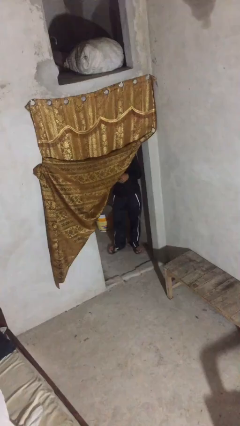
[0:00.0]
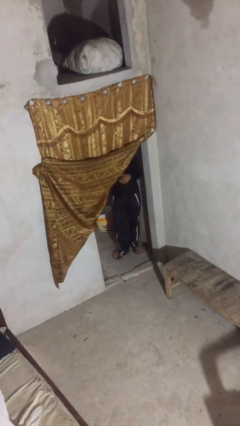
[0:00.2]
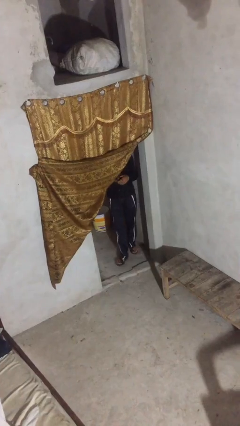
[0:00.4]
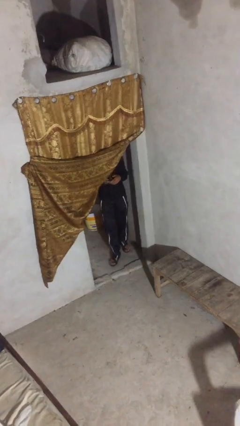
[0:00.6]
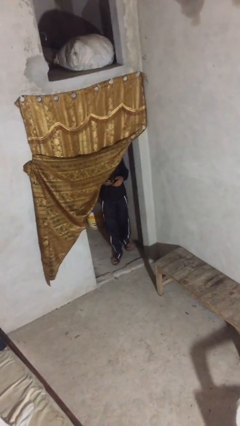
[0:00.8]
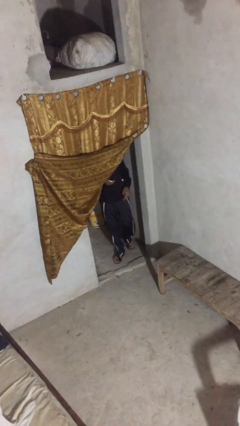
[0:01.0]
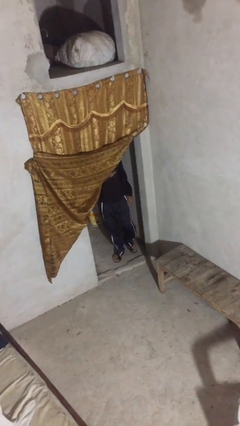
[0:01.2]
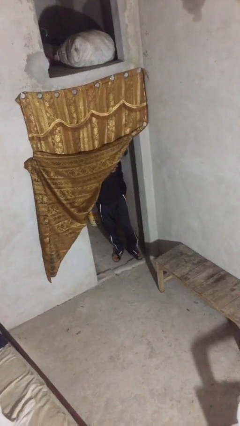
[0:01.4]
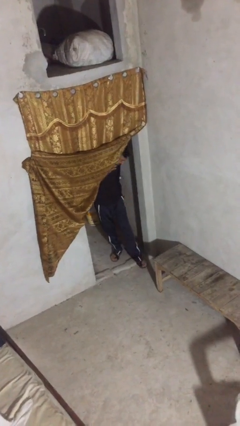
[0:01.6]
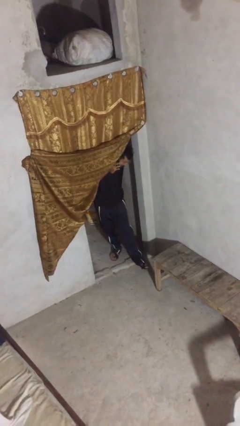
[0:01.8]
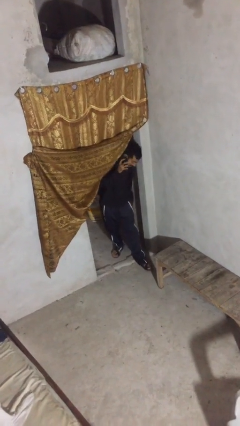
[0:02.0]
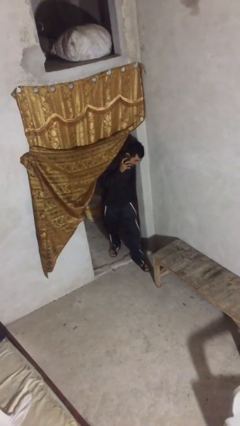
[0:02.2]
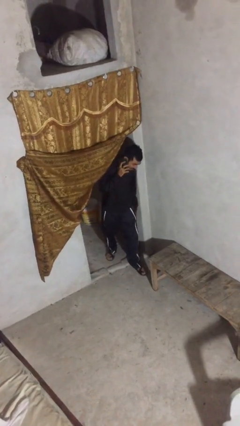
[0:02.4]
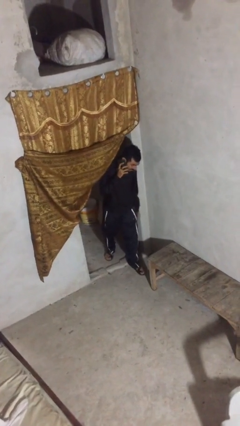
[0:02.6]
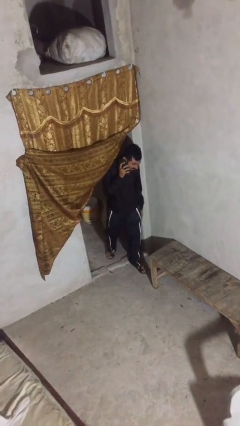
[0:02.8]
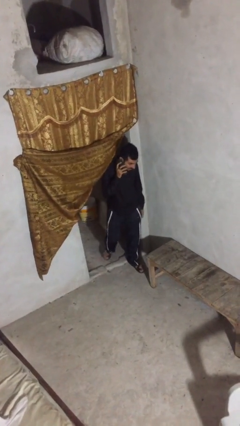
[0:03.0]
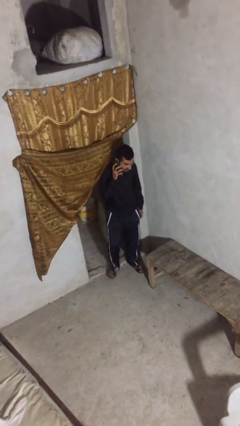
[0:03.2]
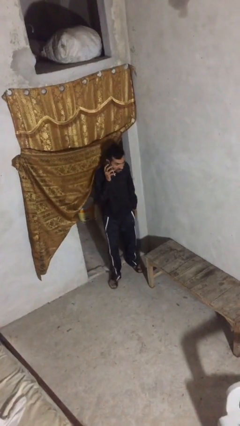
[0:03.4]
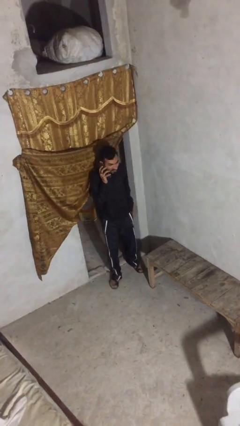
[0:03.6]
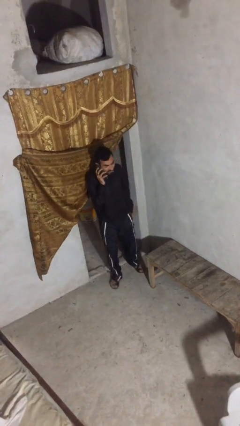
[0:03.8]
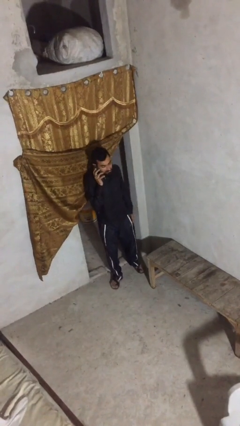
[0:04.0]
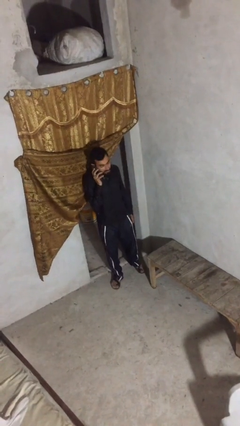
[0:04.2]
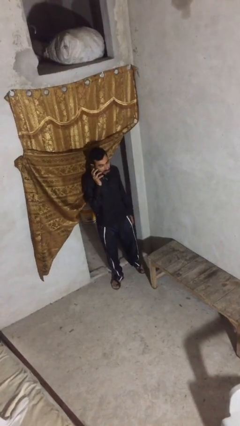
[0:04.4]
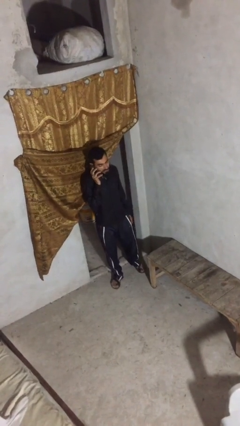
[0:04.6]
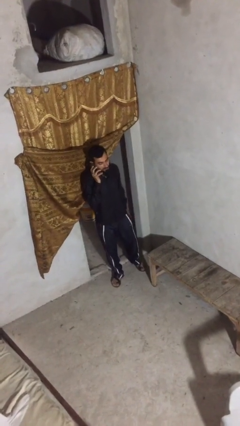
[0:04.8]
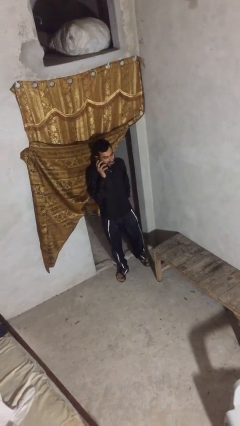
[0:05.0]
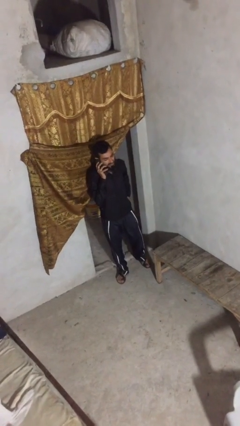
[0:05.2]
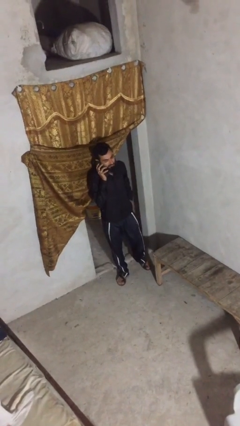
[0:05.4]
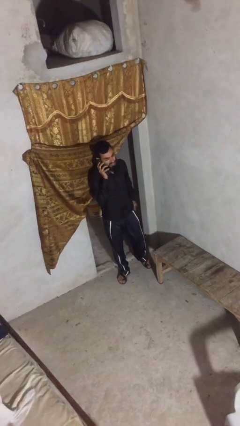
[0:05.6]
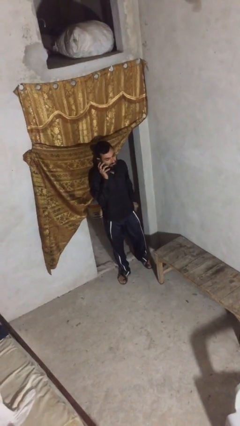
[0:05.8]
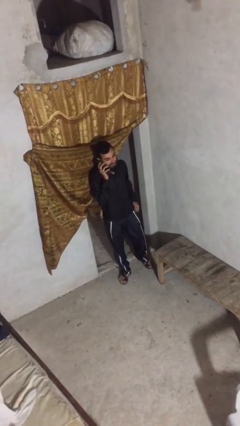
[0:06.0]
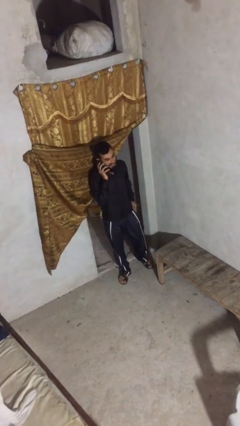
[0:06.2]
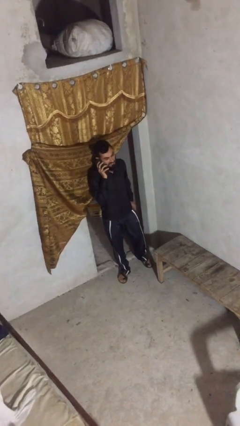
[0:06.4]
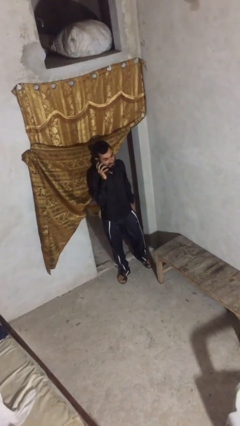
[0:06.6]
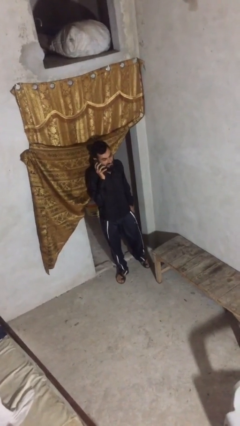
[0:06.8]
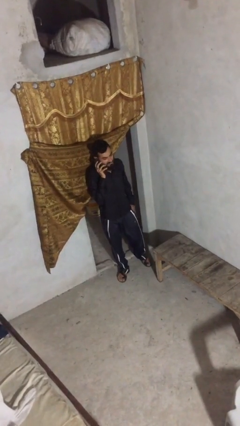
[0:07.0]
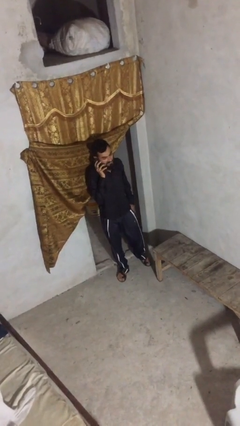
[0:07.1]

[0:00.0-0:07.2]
person enters scene through structure

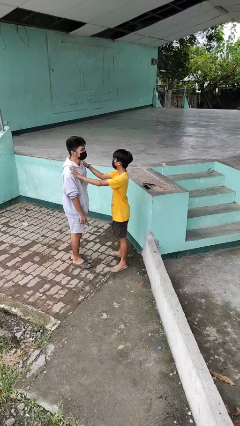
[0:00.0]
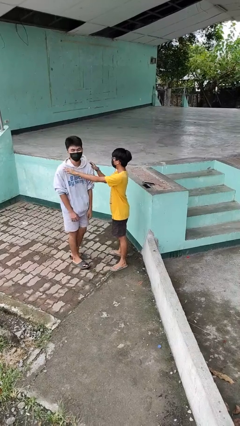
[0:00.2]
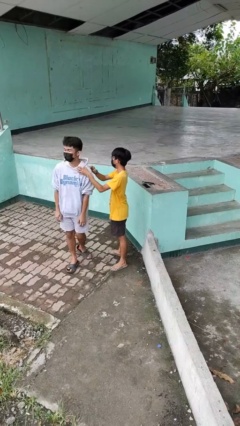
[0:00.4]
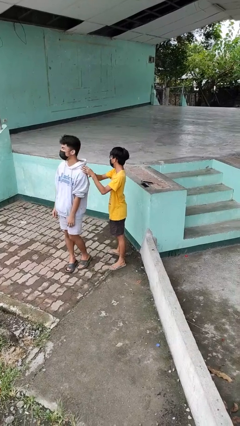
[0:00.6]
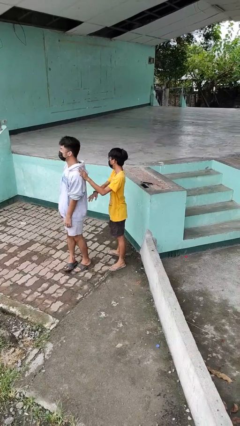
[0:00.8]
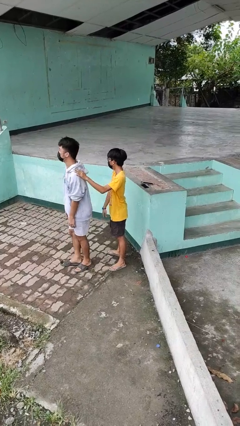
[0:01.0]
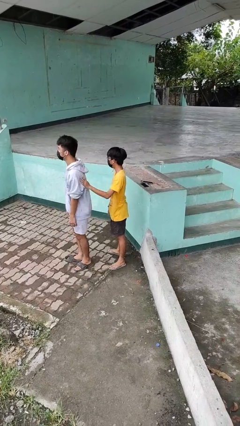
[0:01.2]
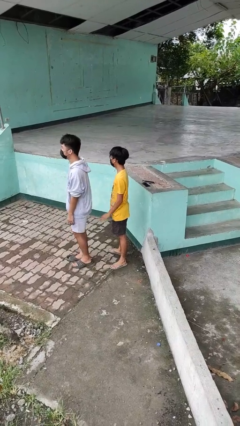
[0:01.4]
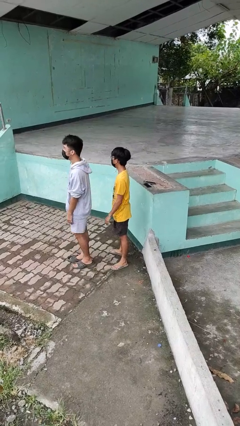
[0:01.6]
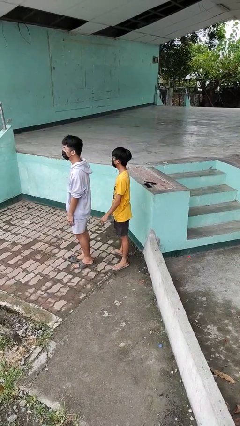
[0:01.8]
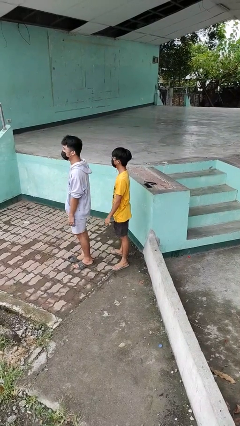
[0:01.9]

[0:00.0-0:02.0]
person spins person around

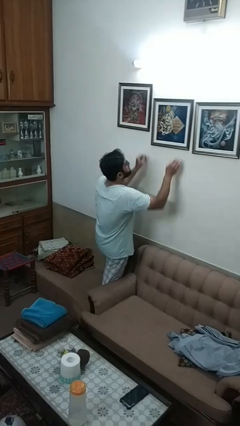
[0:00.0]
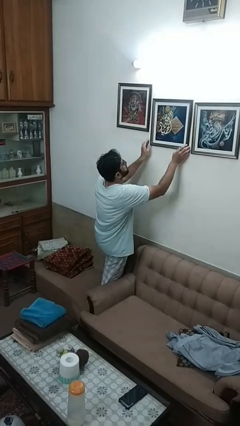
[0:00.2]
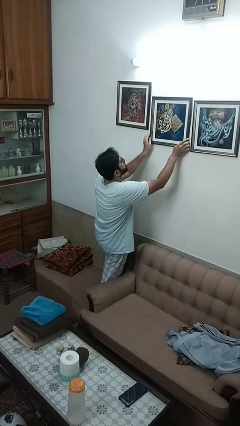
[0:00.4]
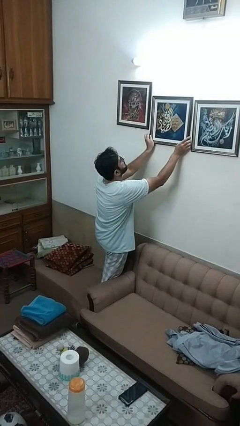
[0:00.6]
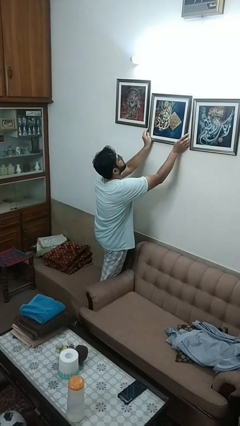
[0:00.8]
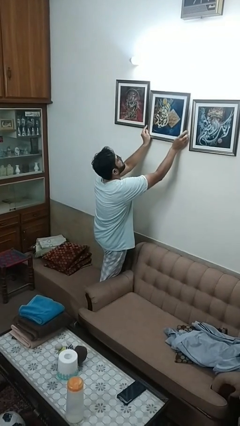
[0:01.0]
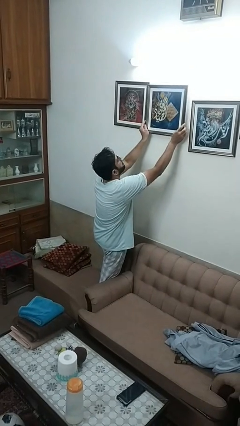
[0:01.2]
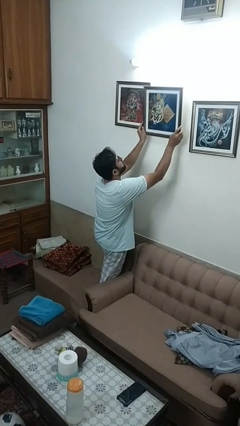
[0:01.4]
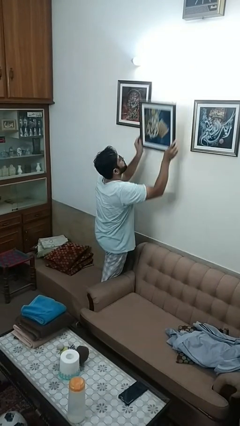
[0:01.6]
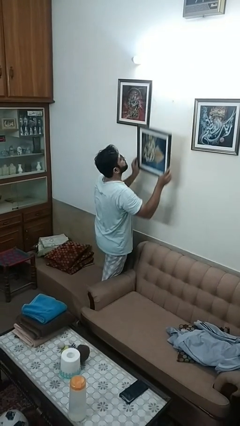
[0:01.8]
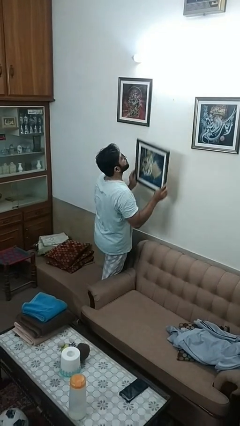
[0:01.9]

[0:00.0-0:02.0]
person takes down picture frame

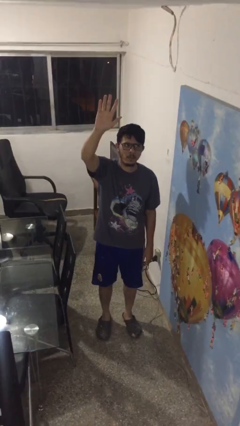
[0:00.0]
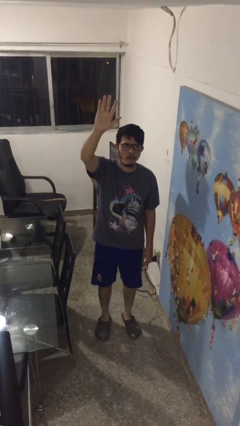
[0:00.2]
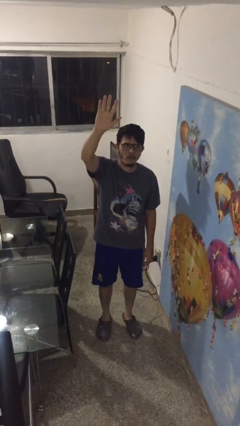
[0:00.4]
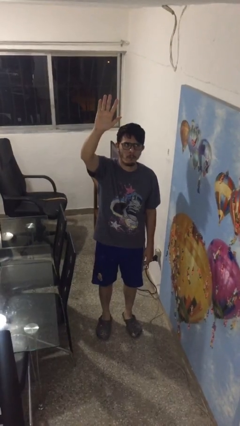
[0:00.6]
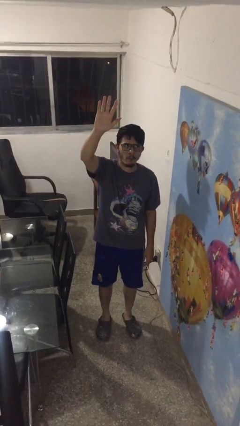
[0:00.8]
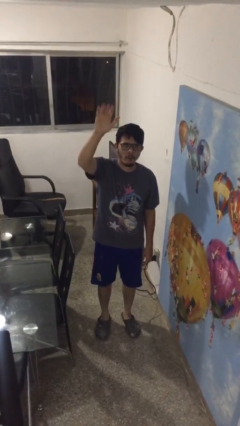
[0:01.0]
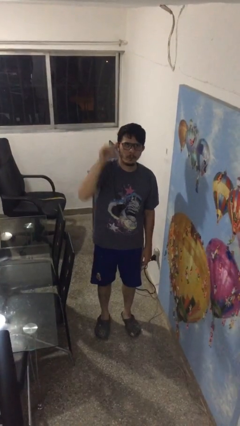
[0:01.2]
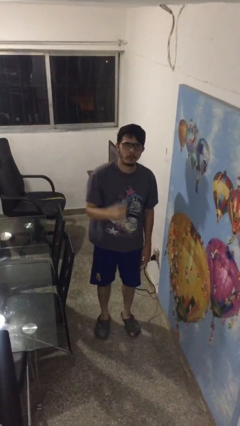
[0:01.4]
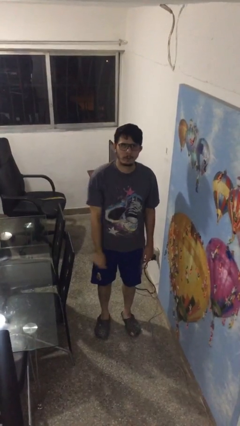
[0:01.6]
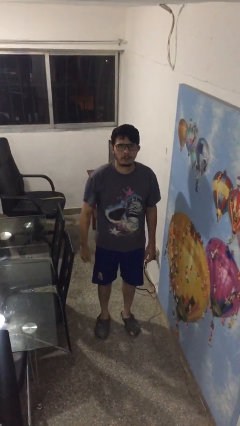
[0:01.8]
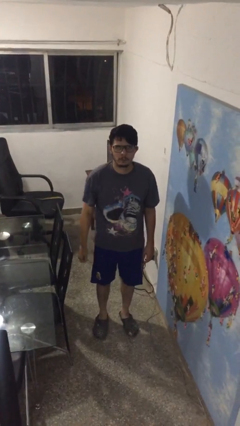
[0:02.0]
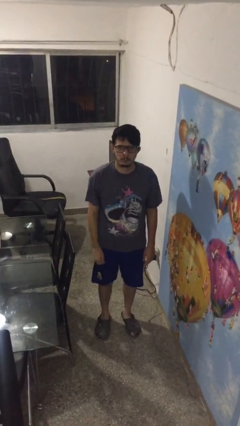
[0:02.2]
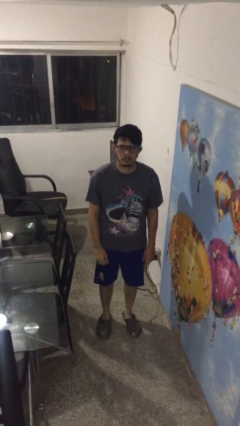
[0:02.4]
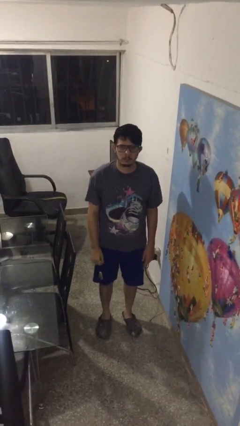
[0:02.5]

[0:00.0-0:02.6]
person gestures lower hand

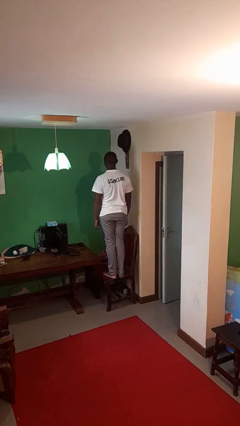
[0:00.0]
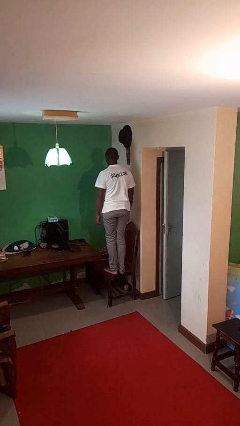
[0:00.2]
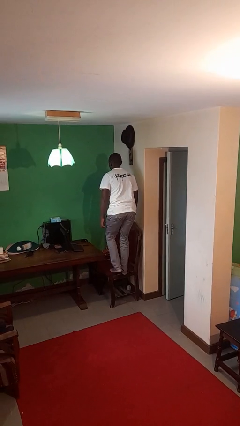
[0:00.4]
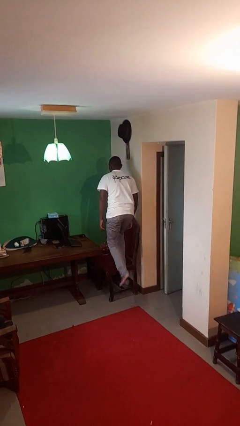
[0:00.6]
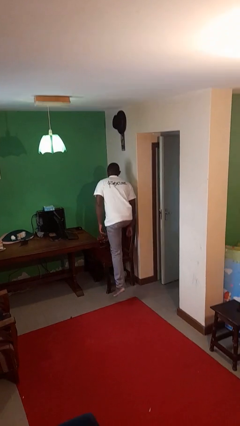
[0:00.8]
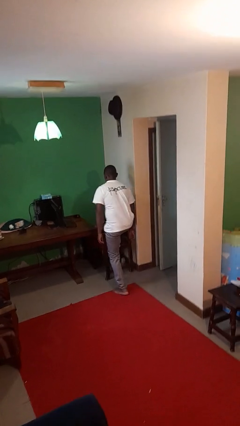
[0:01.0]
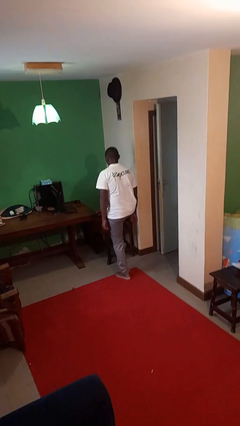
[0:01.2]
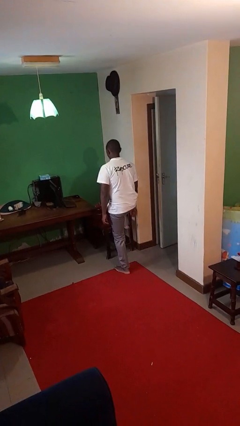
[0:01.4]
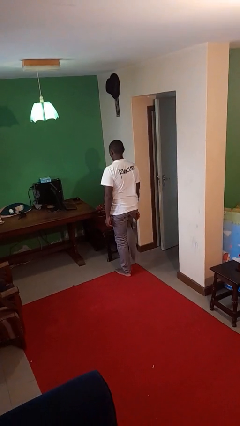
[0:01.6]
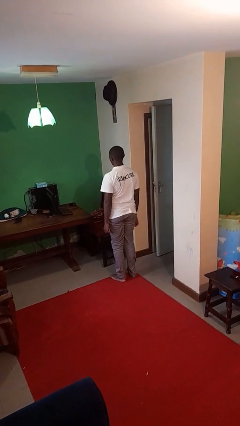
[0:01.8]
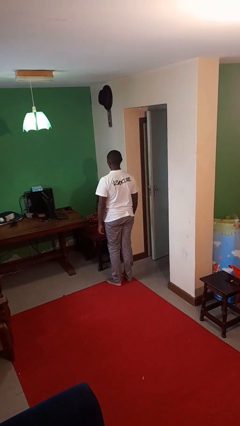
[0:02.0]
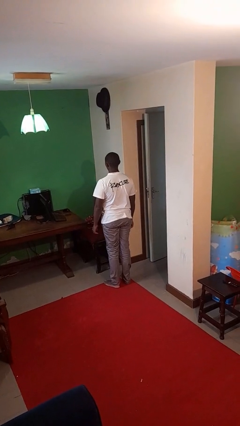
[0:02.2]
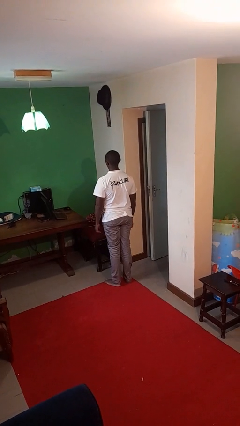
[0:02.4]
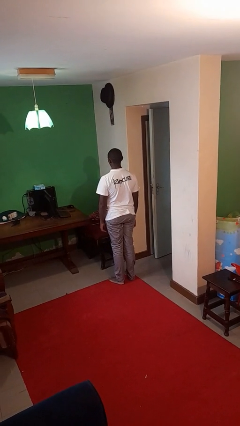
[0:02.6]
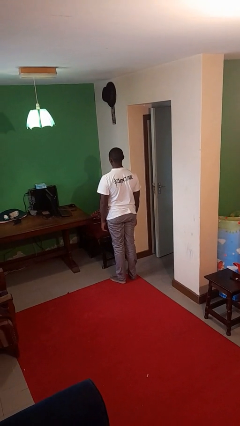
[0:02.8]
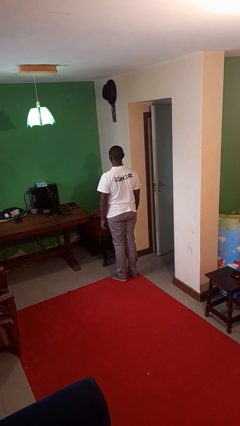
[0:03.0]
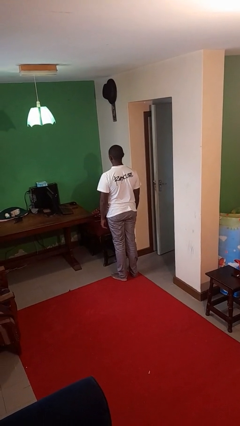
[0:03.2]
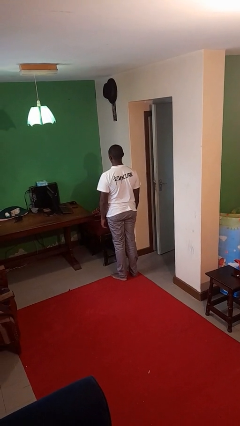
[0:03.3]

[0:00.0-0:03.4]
person climbs off chair

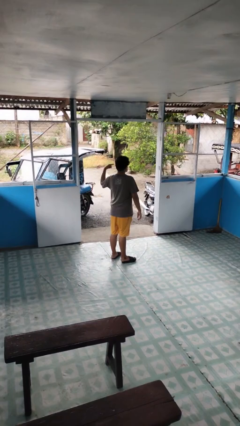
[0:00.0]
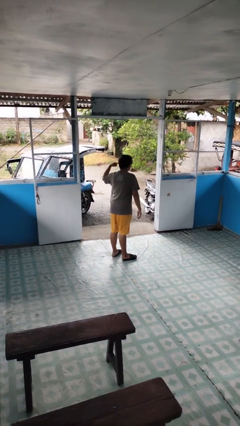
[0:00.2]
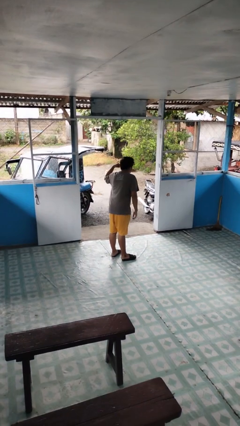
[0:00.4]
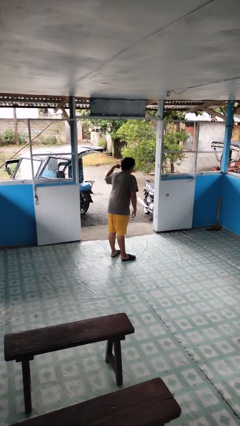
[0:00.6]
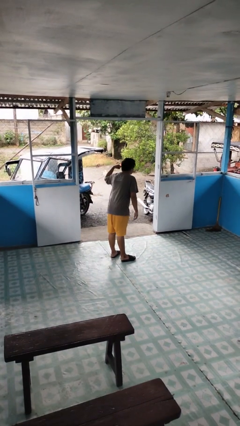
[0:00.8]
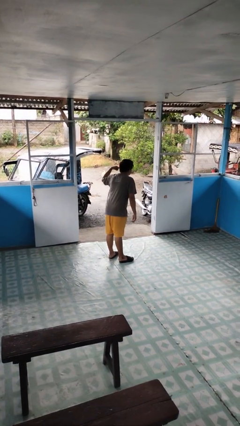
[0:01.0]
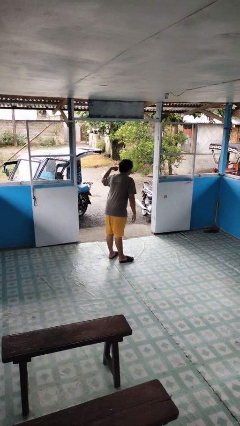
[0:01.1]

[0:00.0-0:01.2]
person gestures listen closely
